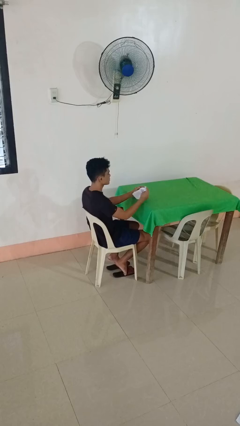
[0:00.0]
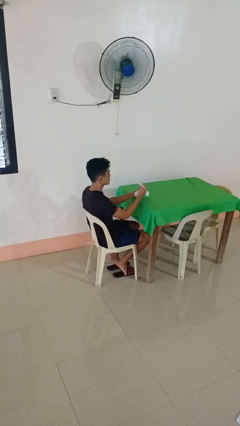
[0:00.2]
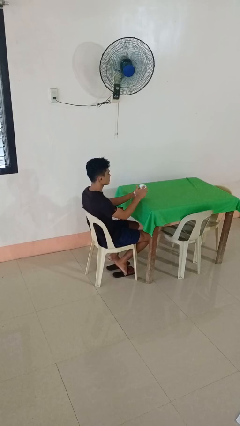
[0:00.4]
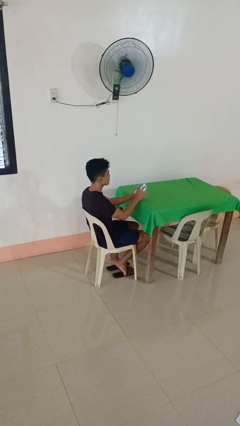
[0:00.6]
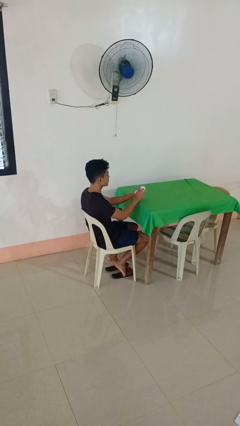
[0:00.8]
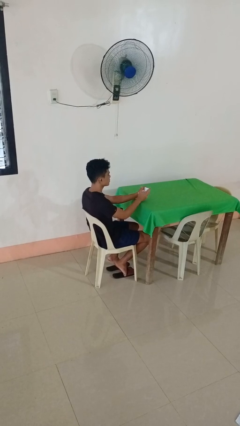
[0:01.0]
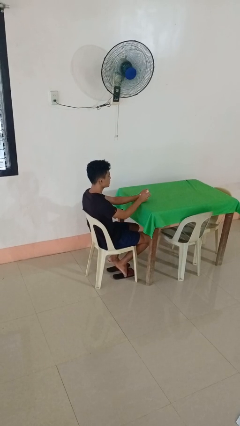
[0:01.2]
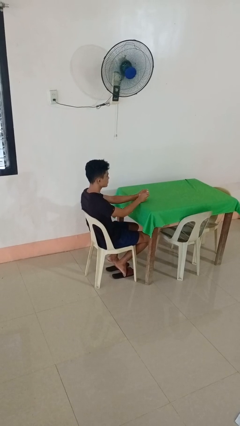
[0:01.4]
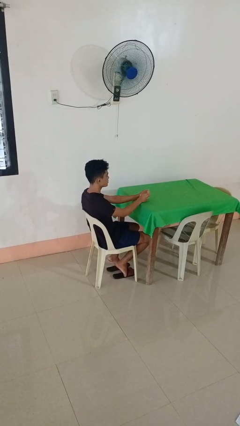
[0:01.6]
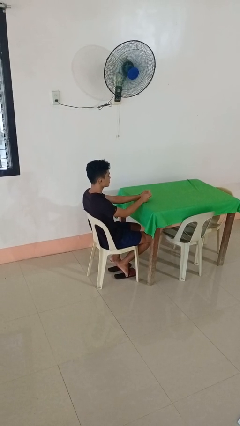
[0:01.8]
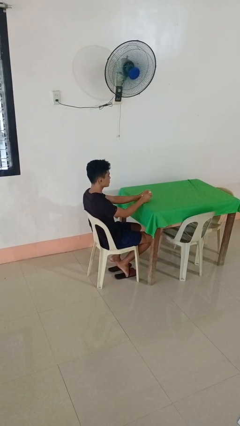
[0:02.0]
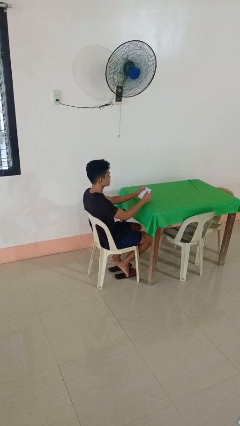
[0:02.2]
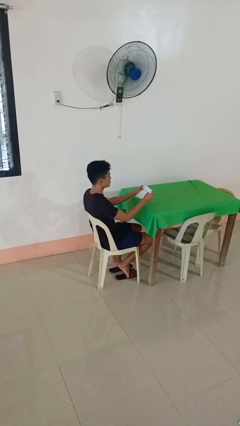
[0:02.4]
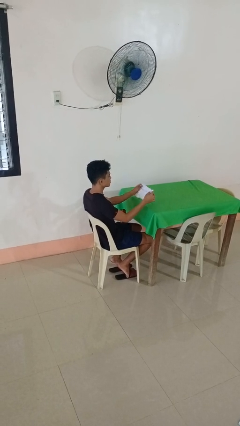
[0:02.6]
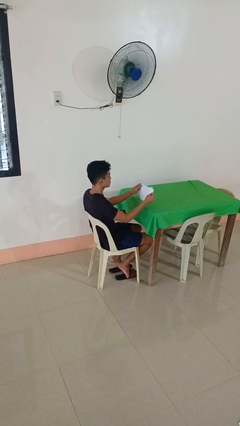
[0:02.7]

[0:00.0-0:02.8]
person crumples paper

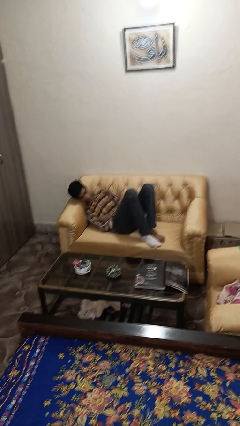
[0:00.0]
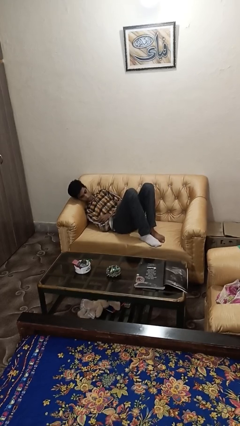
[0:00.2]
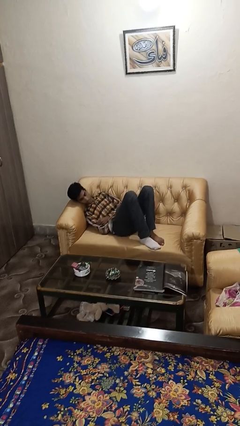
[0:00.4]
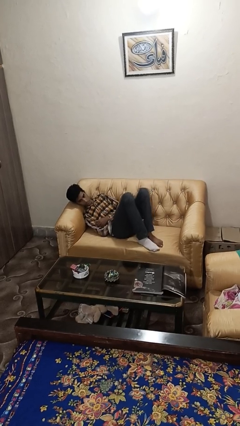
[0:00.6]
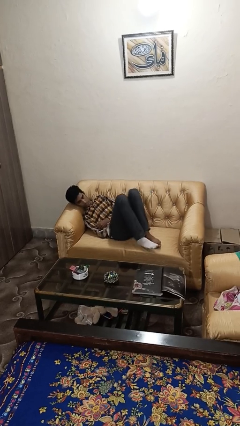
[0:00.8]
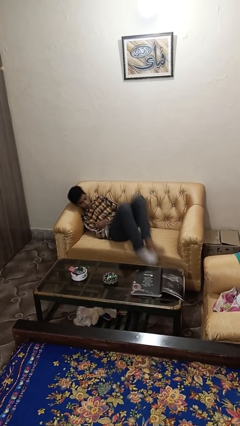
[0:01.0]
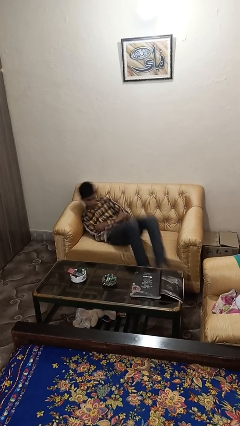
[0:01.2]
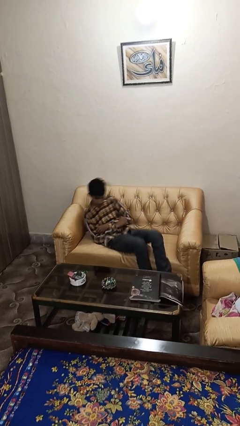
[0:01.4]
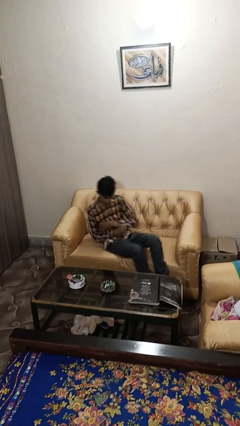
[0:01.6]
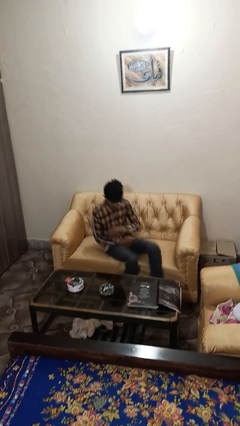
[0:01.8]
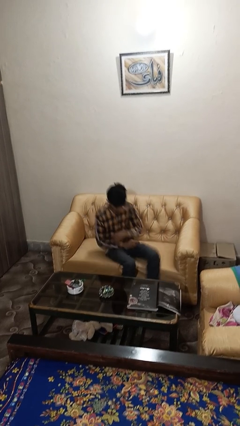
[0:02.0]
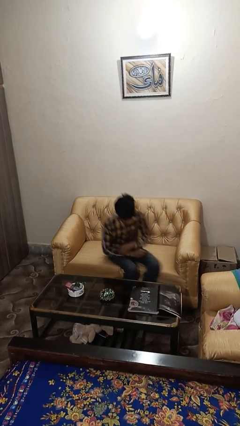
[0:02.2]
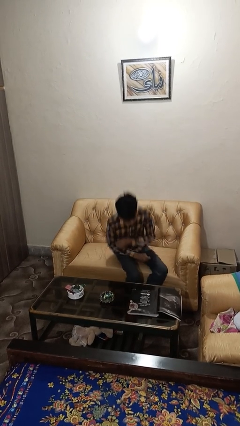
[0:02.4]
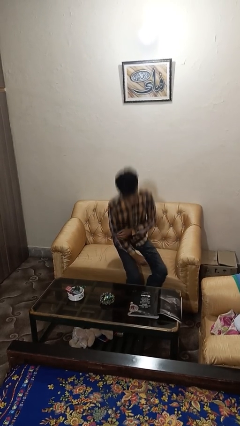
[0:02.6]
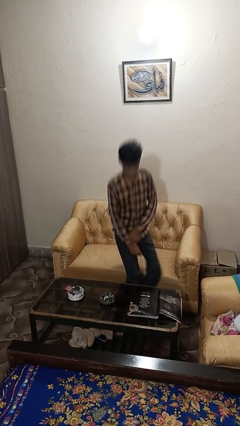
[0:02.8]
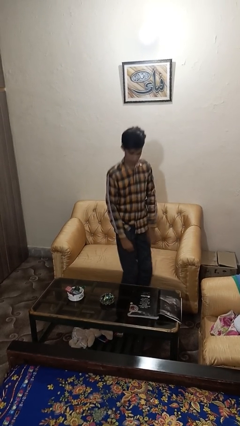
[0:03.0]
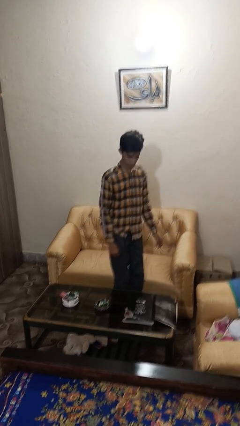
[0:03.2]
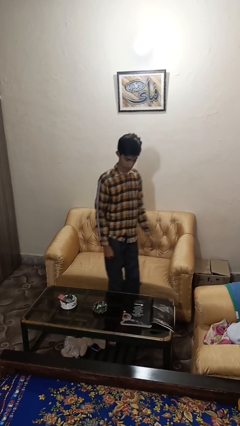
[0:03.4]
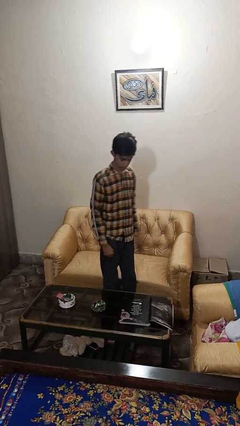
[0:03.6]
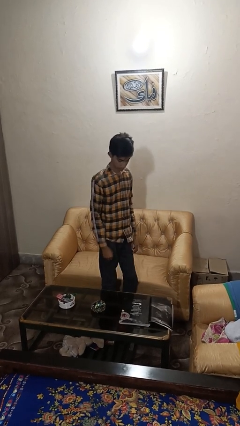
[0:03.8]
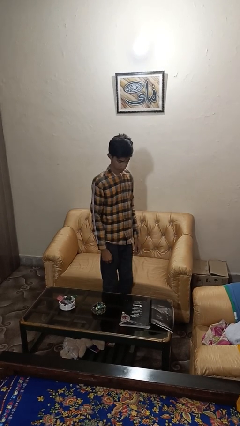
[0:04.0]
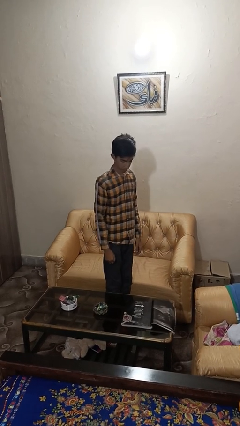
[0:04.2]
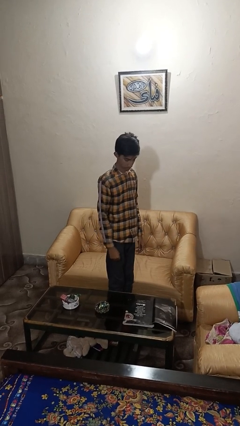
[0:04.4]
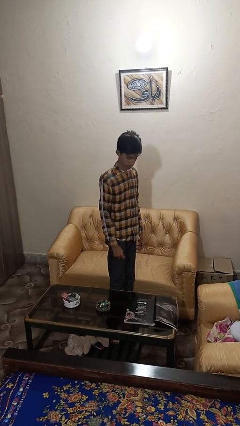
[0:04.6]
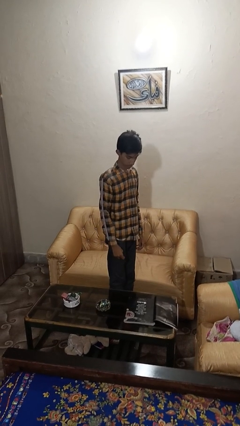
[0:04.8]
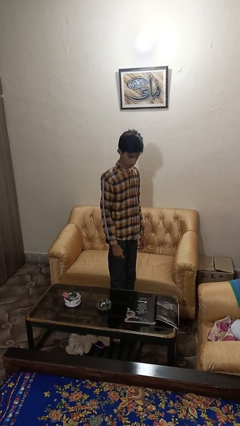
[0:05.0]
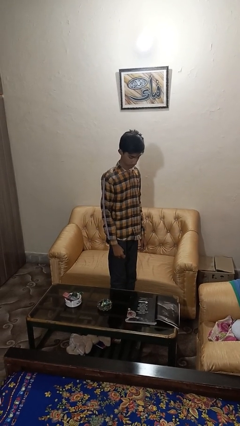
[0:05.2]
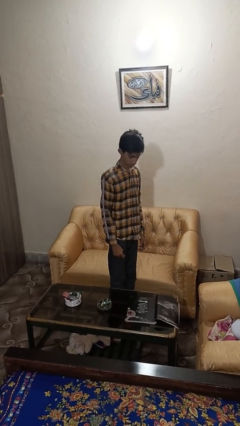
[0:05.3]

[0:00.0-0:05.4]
person stands up

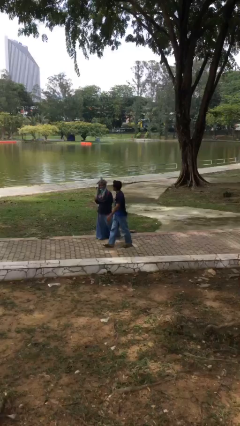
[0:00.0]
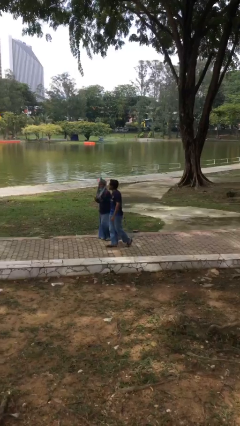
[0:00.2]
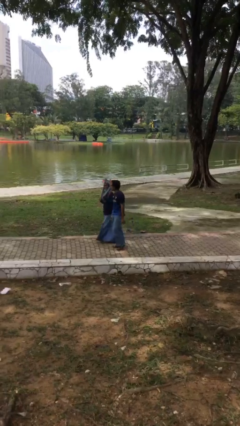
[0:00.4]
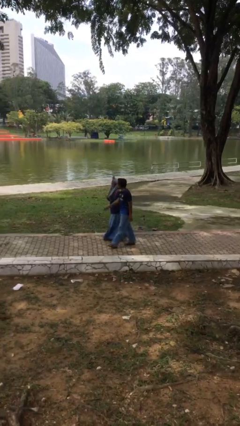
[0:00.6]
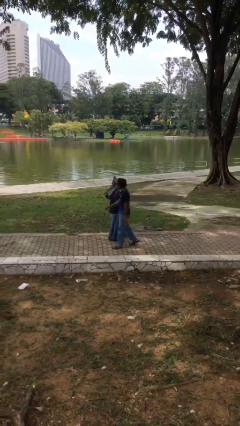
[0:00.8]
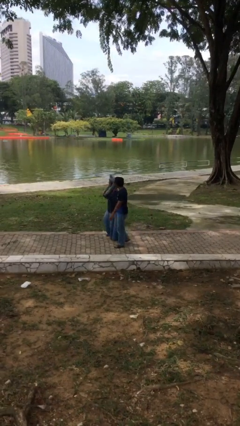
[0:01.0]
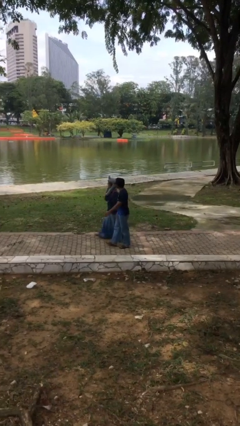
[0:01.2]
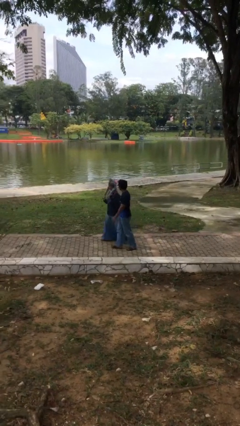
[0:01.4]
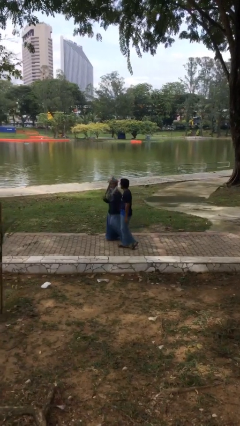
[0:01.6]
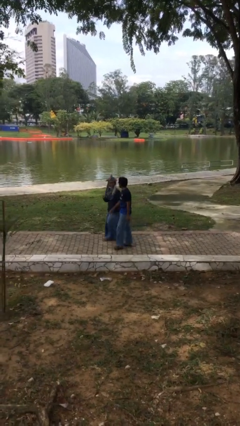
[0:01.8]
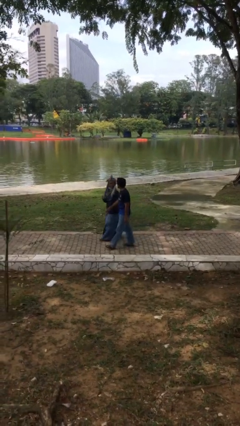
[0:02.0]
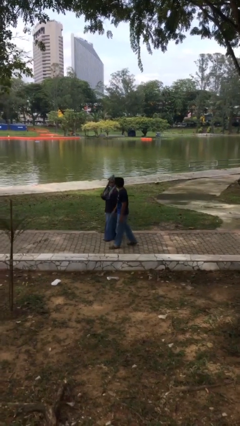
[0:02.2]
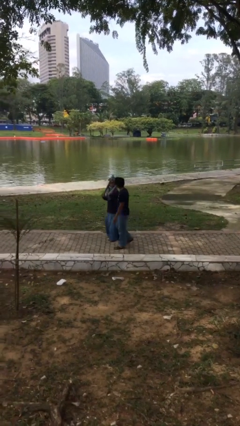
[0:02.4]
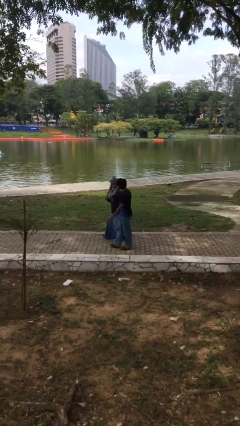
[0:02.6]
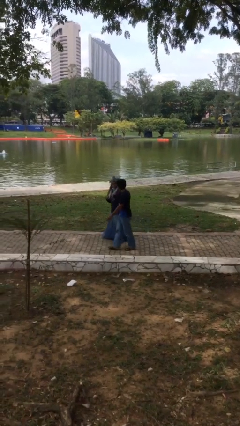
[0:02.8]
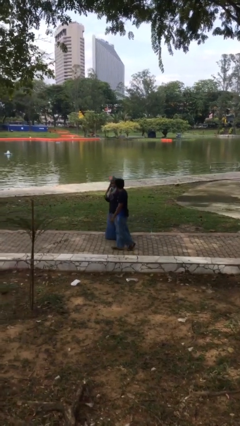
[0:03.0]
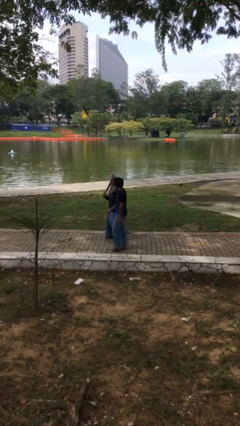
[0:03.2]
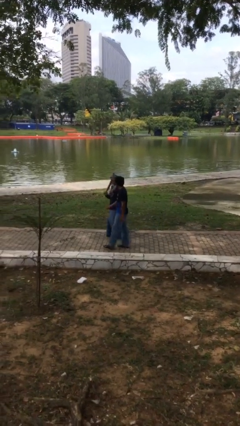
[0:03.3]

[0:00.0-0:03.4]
person talks to person

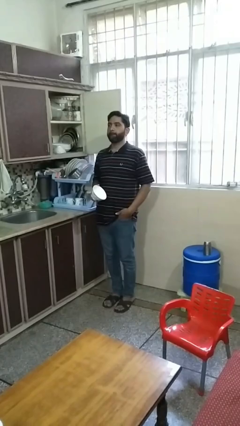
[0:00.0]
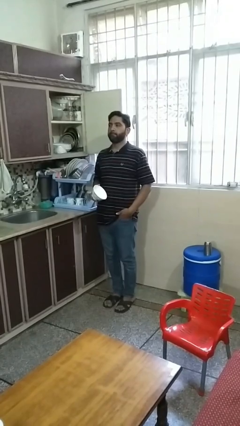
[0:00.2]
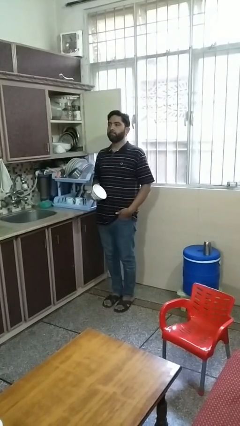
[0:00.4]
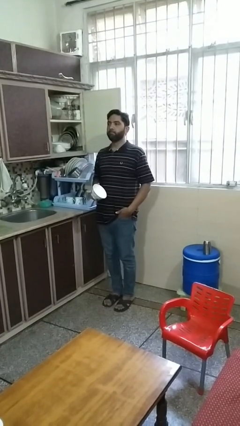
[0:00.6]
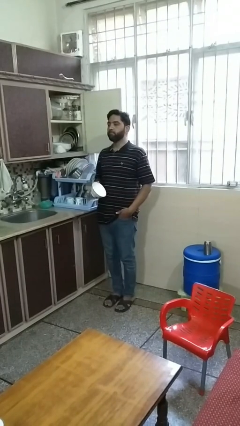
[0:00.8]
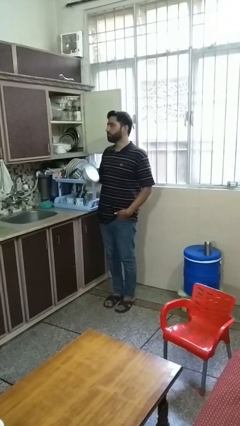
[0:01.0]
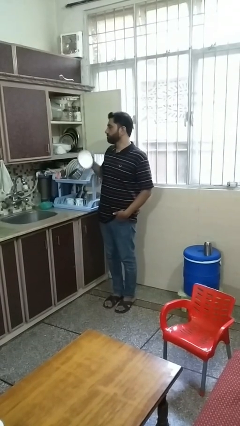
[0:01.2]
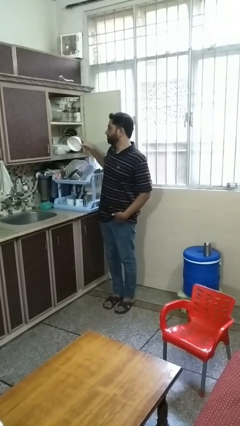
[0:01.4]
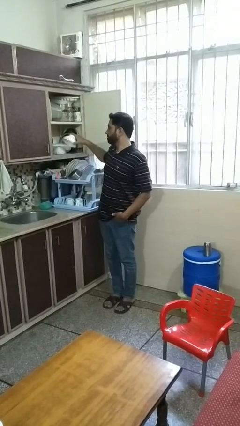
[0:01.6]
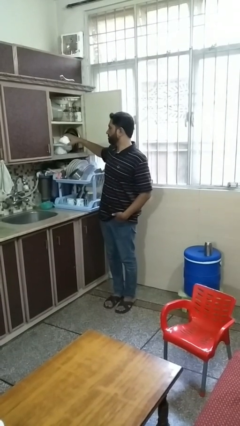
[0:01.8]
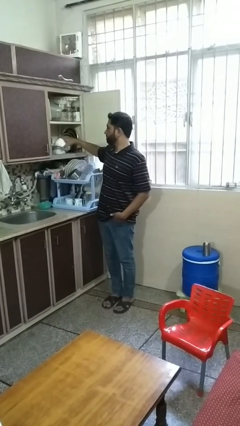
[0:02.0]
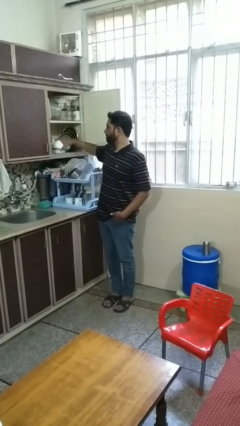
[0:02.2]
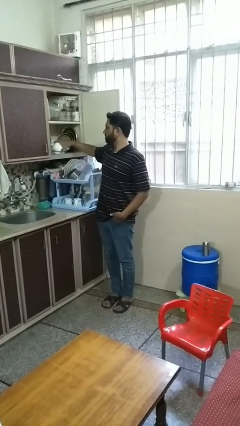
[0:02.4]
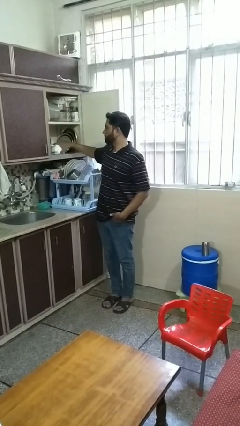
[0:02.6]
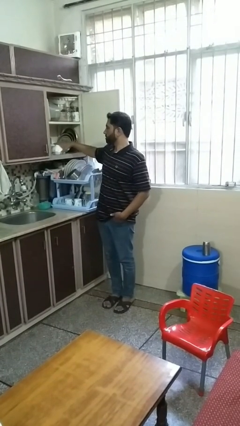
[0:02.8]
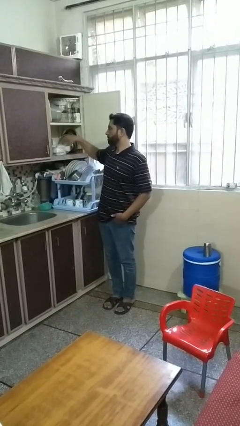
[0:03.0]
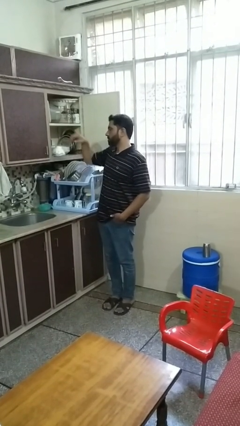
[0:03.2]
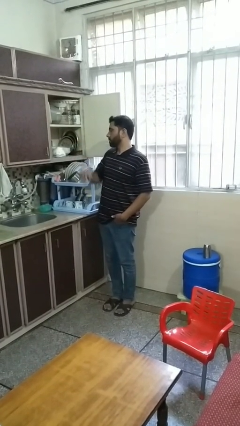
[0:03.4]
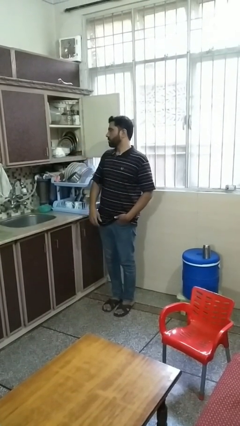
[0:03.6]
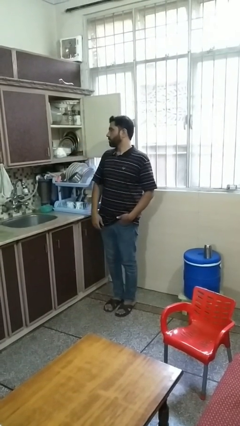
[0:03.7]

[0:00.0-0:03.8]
person puts object in cabinet

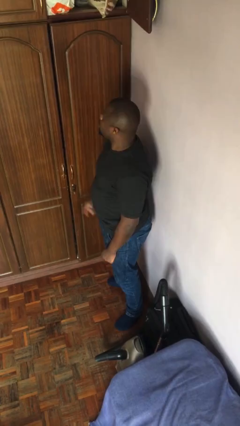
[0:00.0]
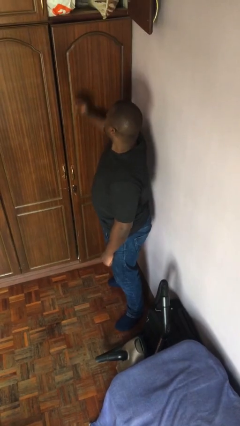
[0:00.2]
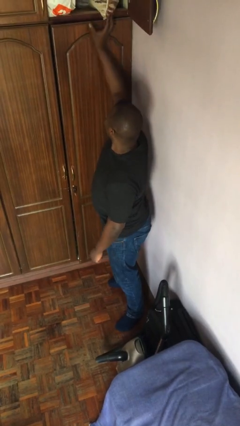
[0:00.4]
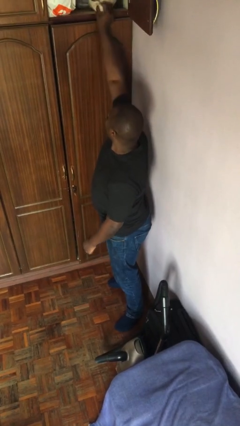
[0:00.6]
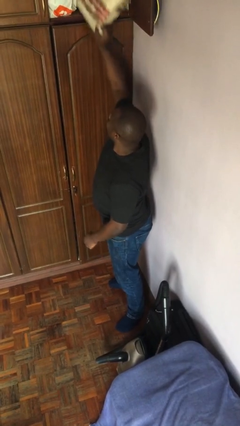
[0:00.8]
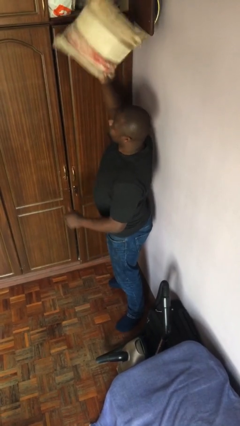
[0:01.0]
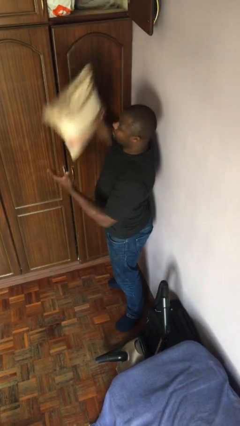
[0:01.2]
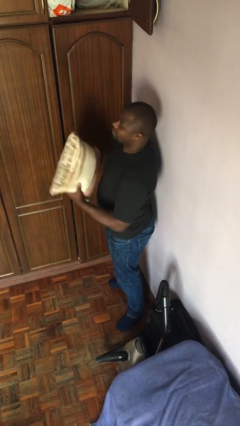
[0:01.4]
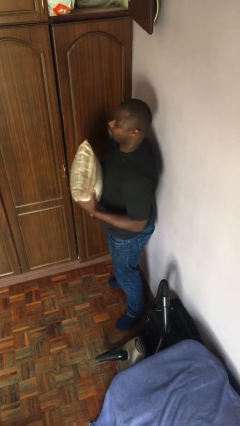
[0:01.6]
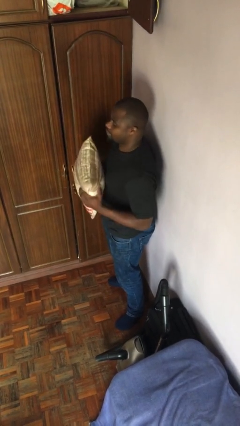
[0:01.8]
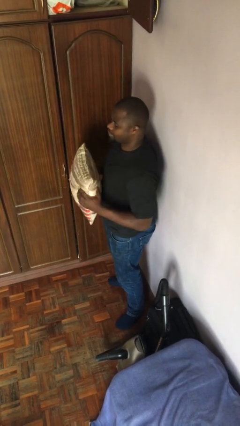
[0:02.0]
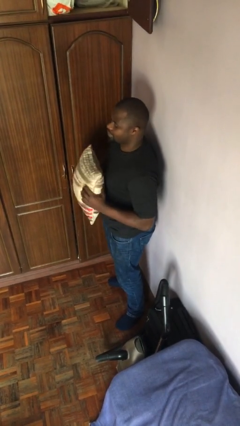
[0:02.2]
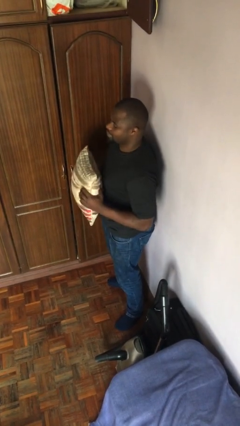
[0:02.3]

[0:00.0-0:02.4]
person picks up object from shelf
